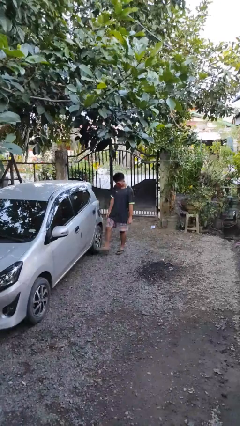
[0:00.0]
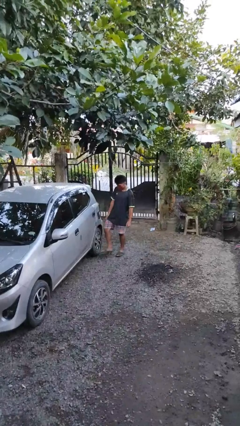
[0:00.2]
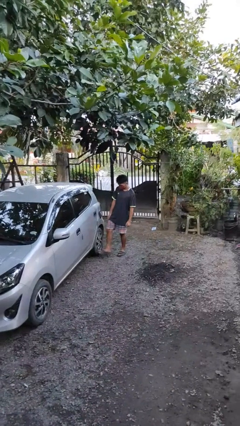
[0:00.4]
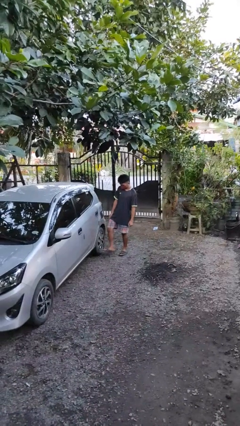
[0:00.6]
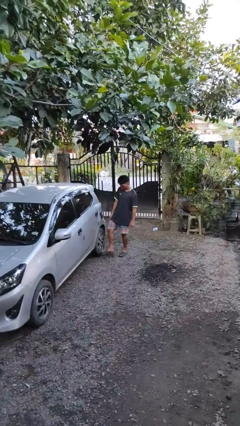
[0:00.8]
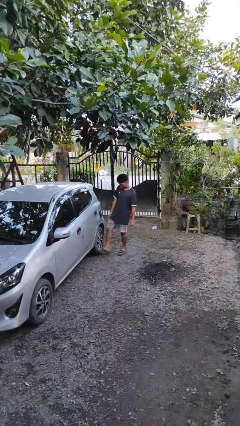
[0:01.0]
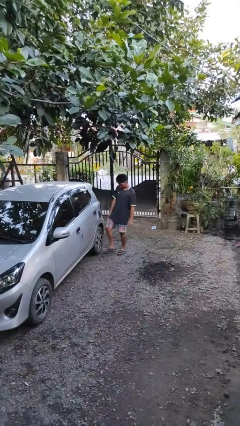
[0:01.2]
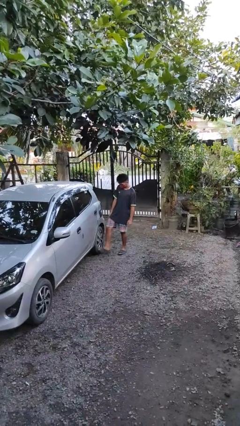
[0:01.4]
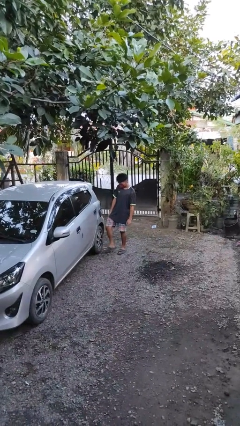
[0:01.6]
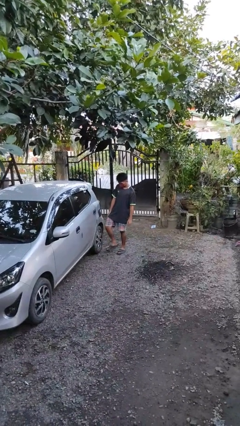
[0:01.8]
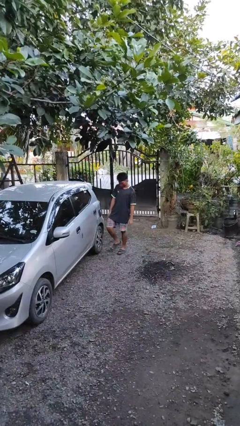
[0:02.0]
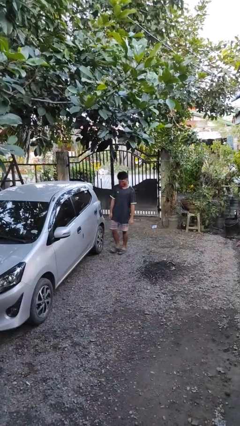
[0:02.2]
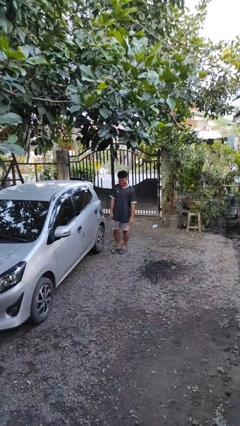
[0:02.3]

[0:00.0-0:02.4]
person kicks car tires

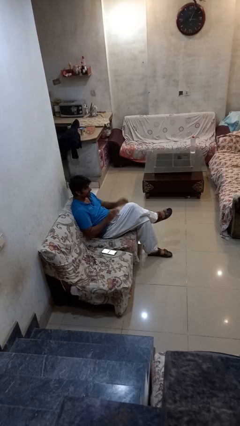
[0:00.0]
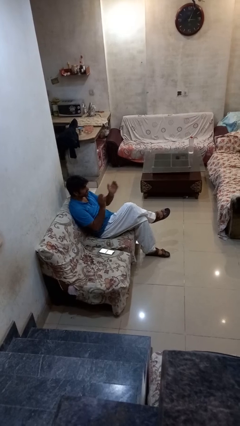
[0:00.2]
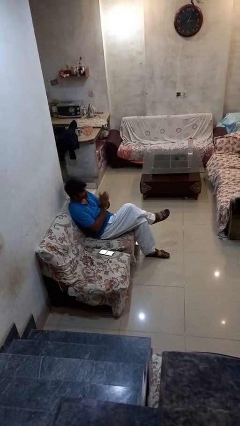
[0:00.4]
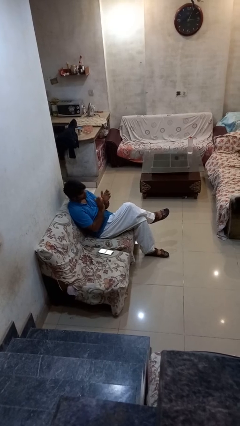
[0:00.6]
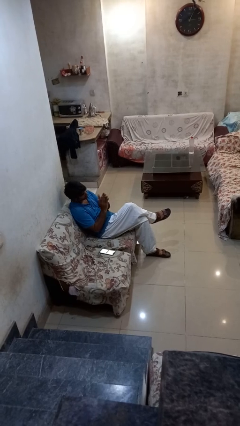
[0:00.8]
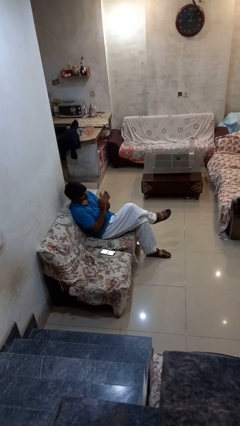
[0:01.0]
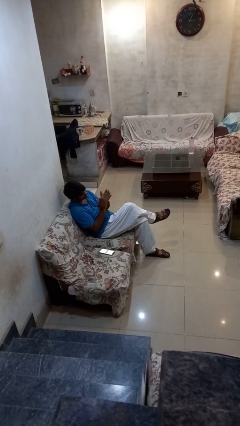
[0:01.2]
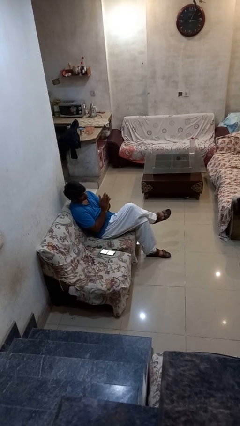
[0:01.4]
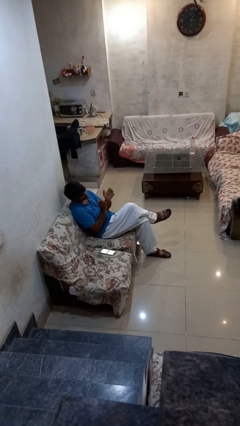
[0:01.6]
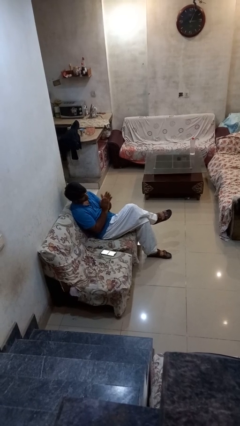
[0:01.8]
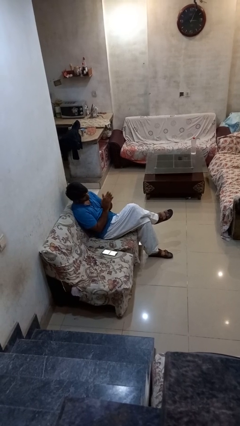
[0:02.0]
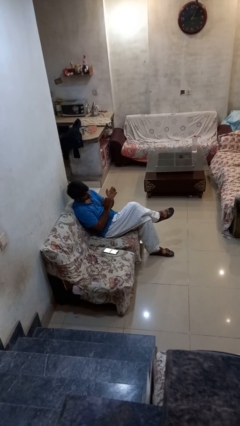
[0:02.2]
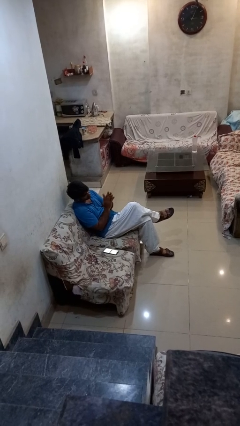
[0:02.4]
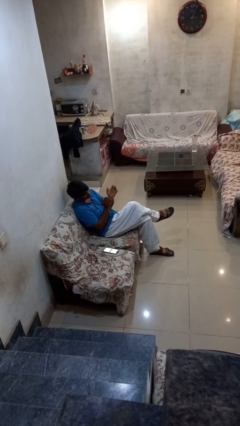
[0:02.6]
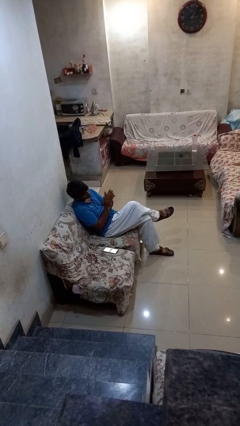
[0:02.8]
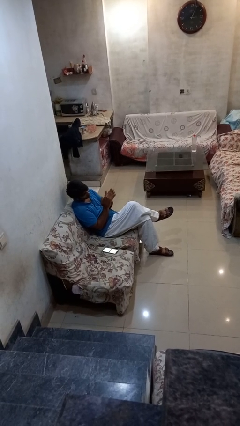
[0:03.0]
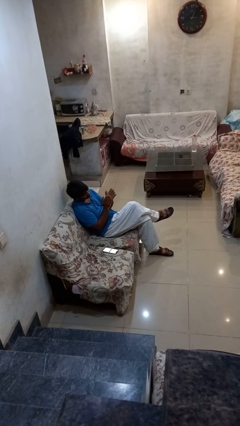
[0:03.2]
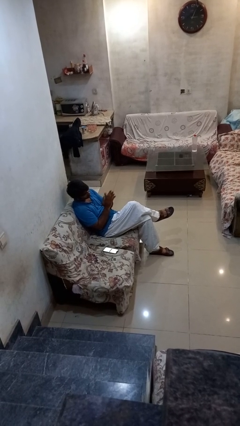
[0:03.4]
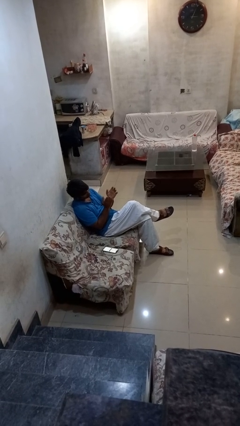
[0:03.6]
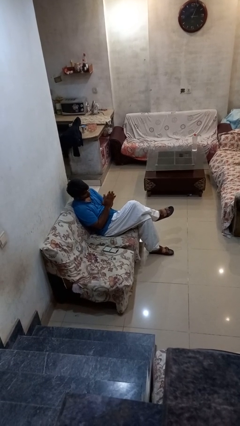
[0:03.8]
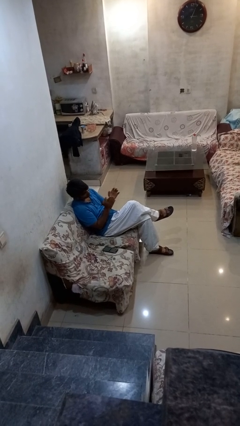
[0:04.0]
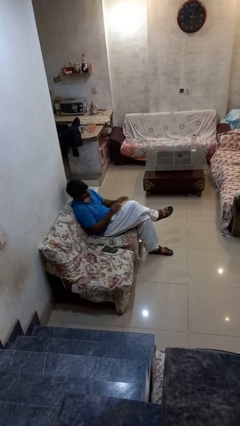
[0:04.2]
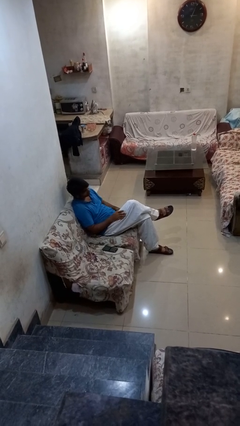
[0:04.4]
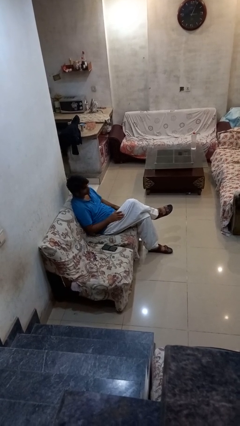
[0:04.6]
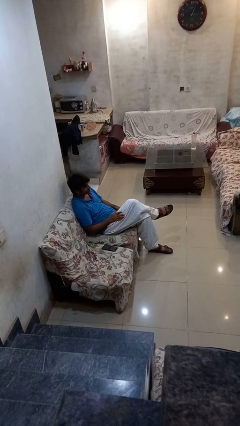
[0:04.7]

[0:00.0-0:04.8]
person claps hands

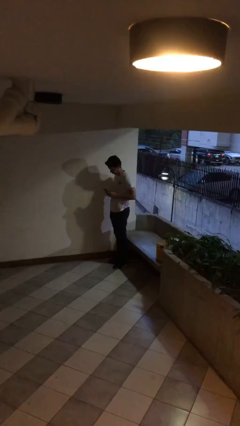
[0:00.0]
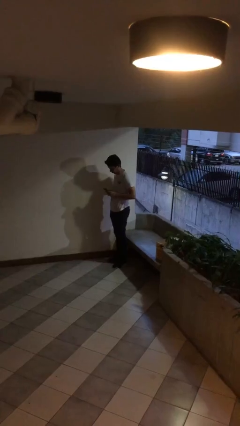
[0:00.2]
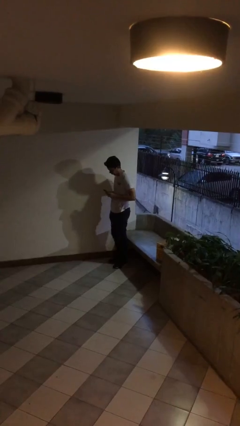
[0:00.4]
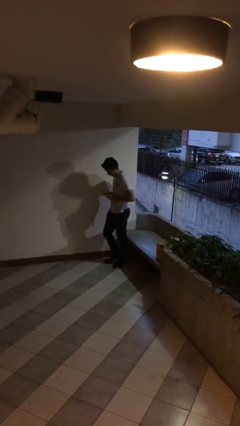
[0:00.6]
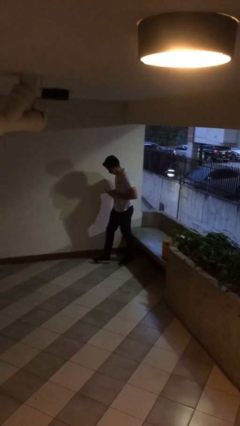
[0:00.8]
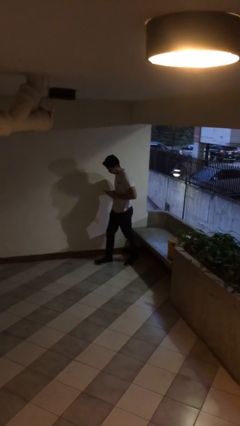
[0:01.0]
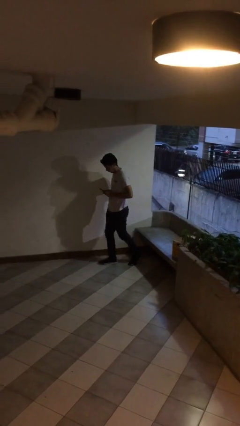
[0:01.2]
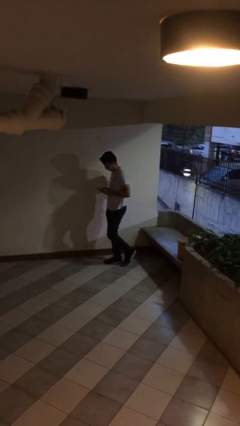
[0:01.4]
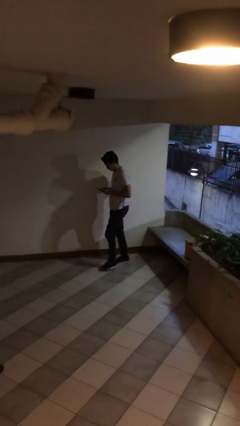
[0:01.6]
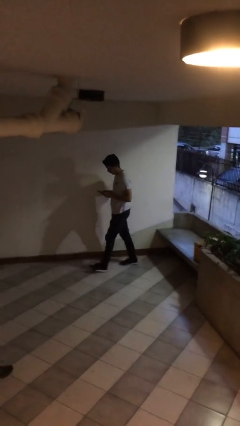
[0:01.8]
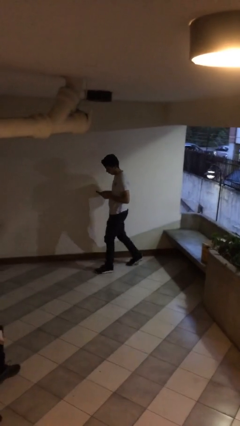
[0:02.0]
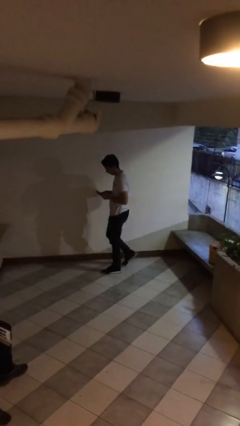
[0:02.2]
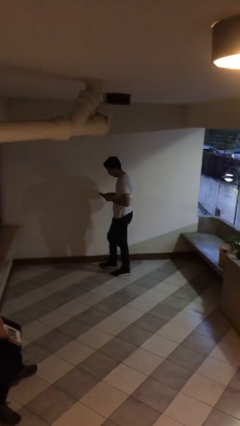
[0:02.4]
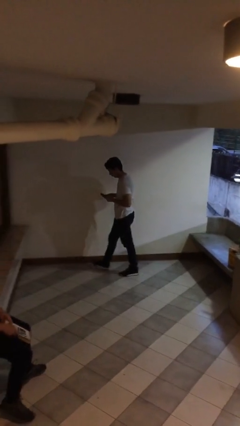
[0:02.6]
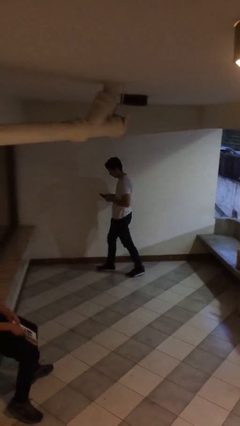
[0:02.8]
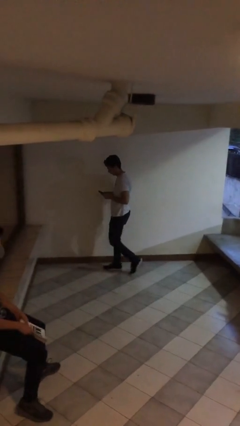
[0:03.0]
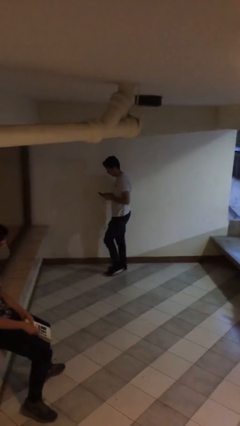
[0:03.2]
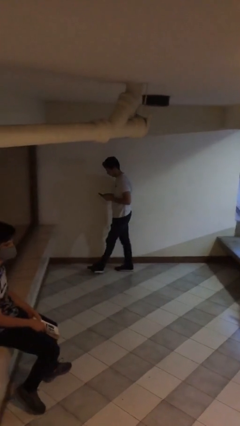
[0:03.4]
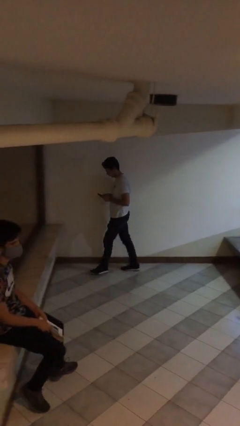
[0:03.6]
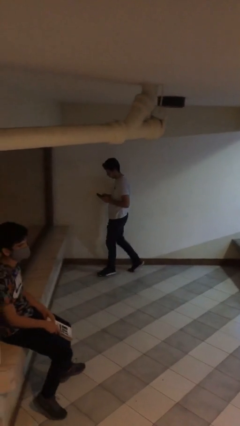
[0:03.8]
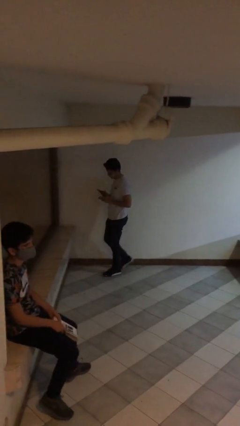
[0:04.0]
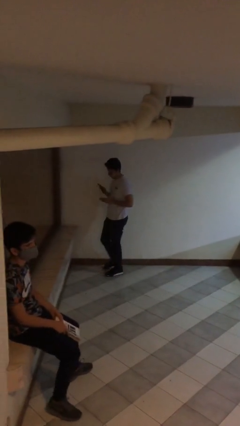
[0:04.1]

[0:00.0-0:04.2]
person texts on phone

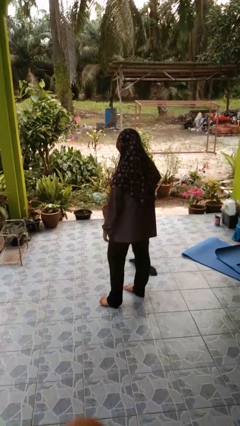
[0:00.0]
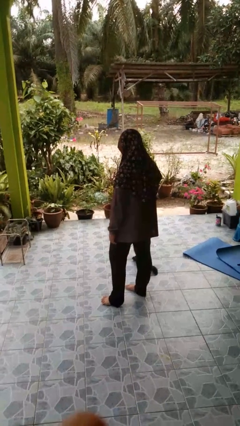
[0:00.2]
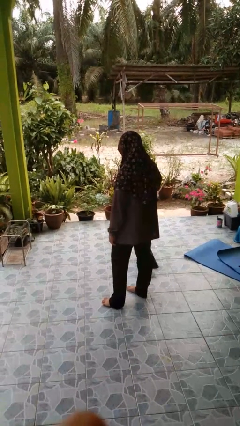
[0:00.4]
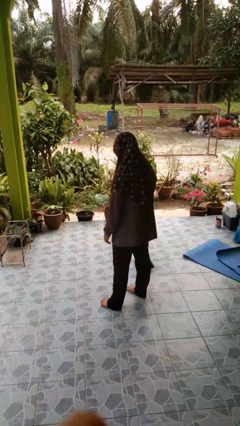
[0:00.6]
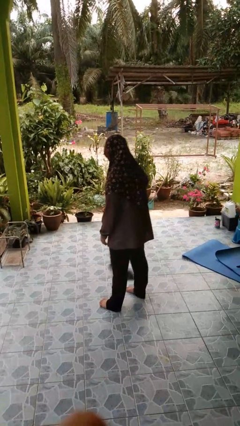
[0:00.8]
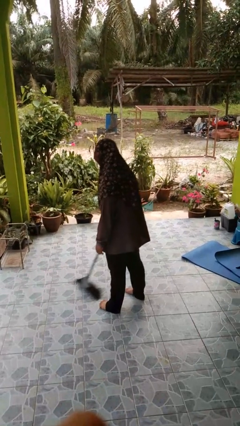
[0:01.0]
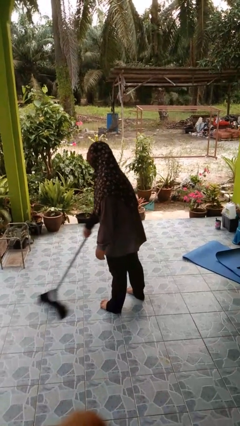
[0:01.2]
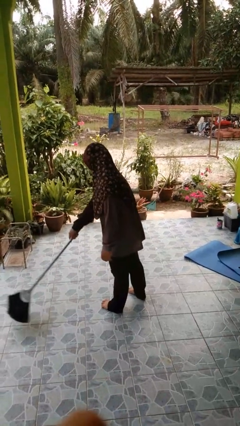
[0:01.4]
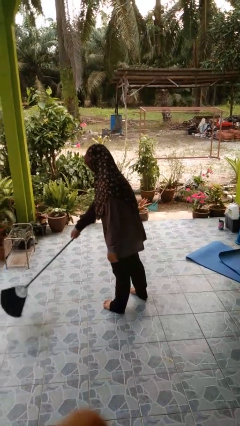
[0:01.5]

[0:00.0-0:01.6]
person sweeps floor

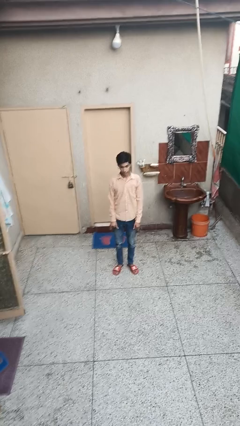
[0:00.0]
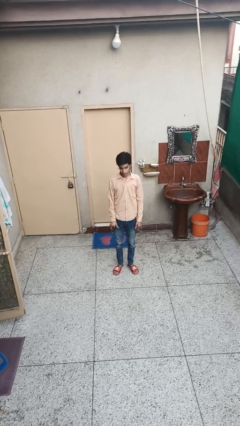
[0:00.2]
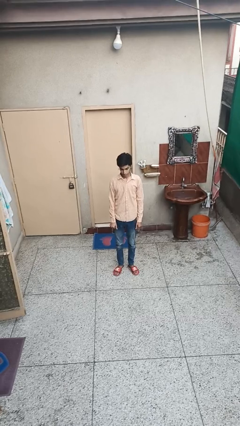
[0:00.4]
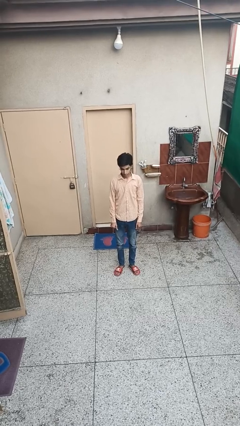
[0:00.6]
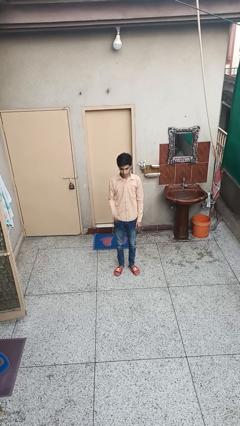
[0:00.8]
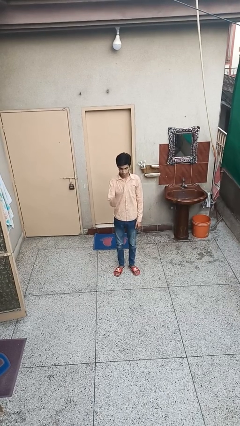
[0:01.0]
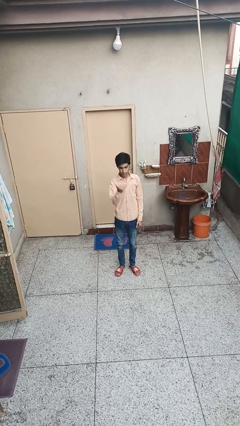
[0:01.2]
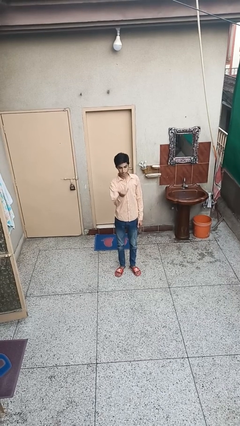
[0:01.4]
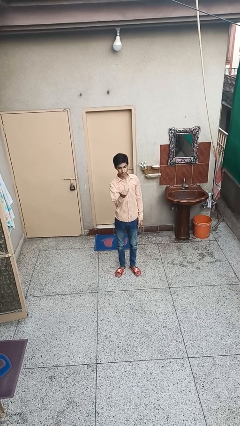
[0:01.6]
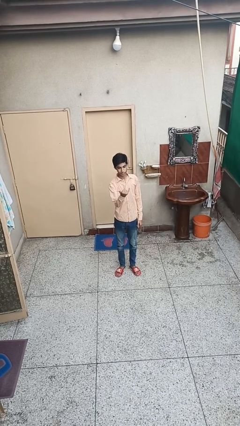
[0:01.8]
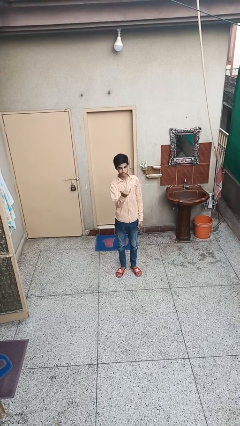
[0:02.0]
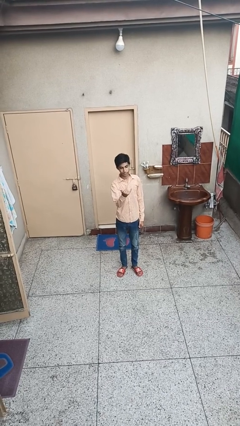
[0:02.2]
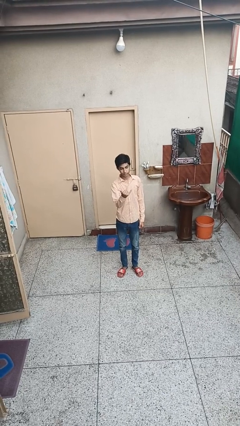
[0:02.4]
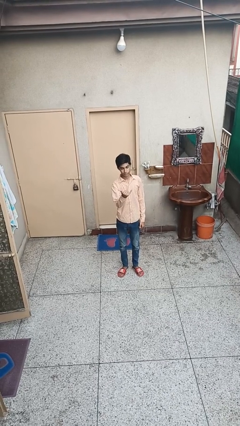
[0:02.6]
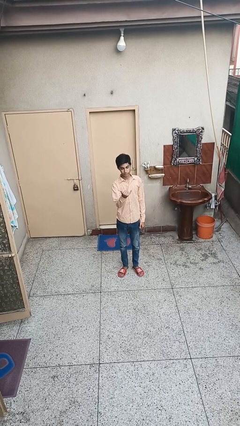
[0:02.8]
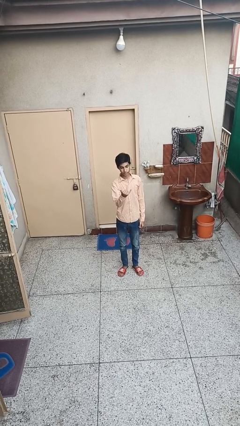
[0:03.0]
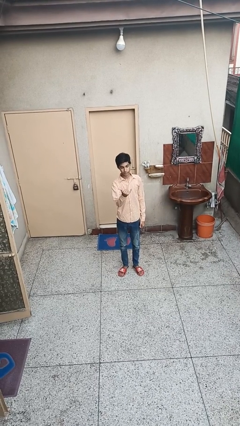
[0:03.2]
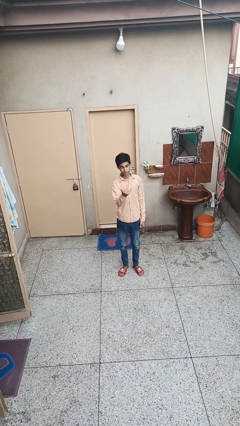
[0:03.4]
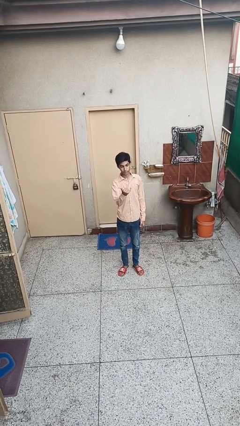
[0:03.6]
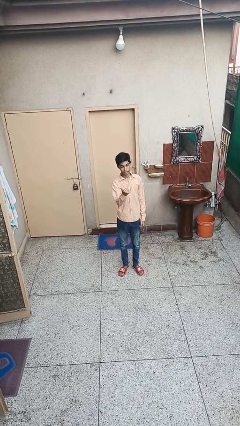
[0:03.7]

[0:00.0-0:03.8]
person gestures hang loose

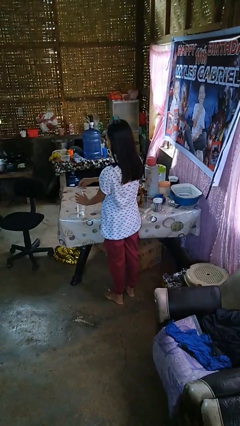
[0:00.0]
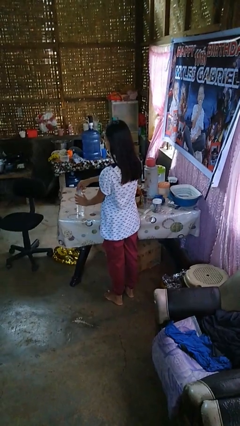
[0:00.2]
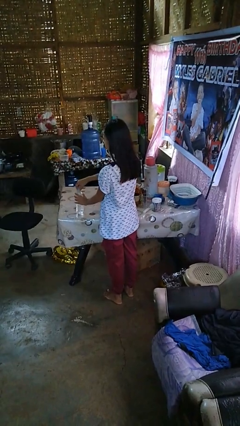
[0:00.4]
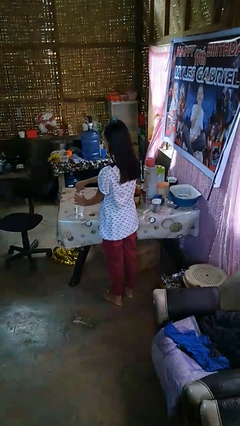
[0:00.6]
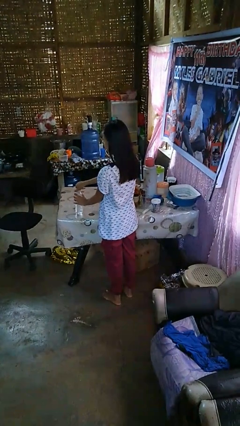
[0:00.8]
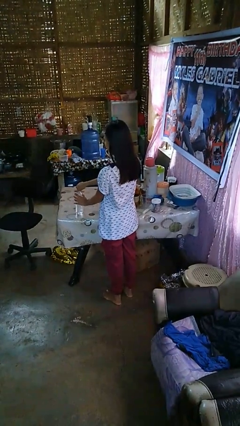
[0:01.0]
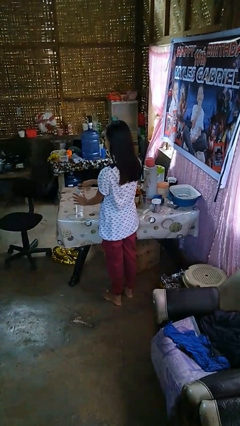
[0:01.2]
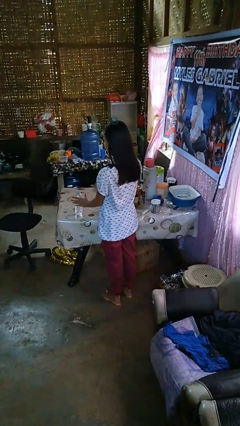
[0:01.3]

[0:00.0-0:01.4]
person screws lid to bottle
